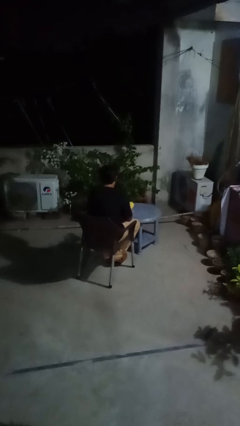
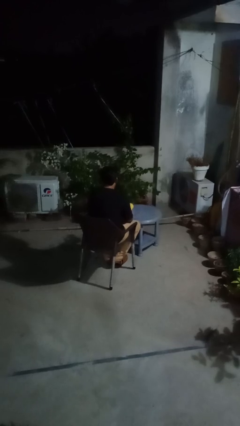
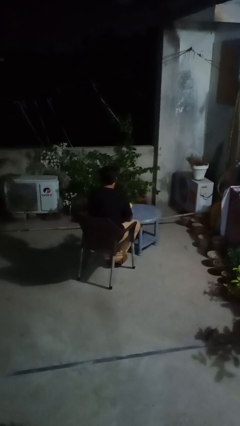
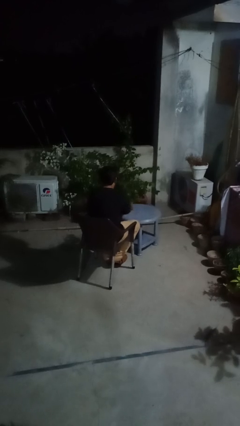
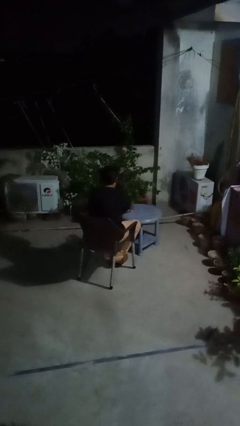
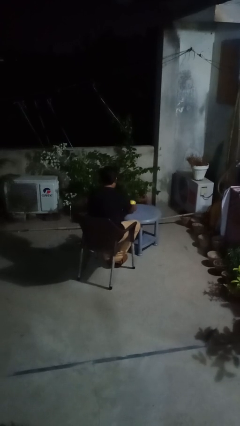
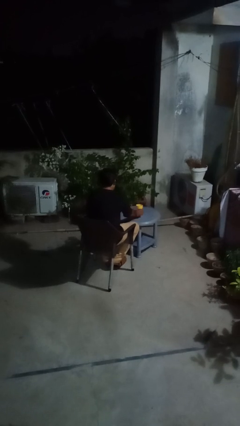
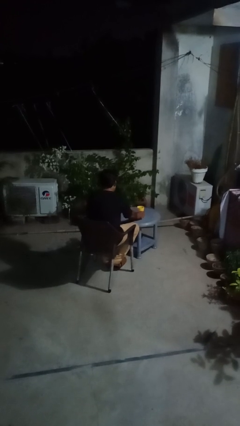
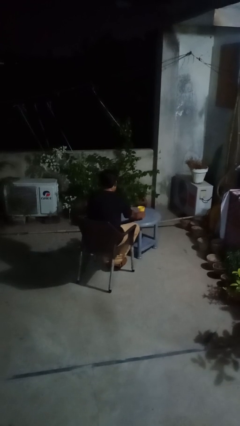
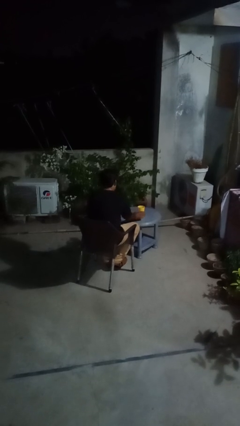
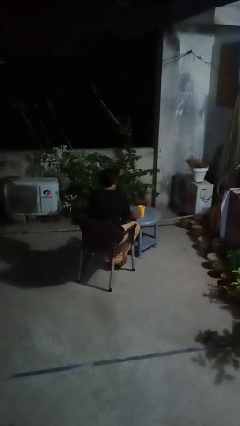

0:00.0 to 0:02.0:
person sets upright glass

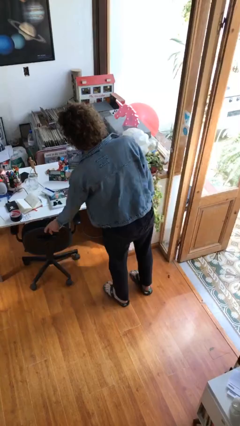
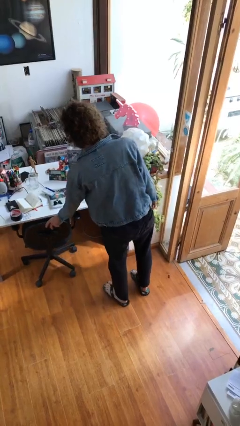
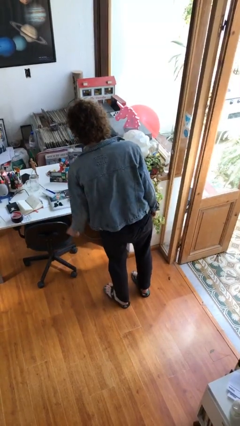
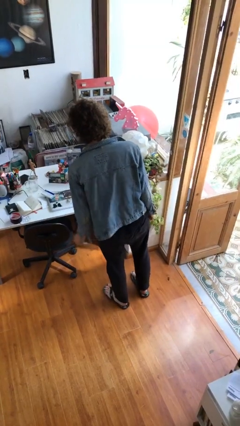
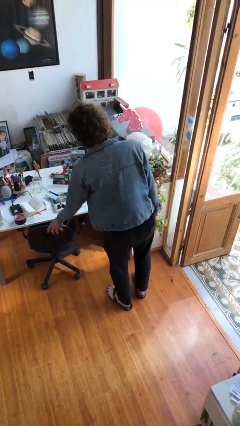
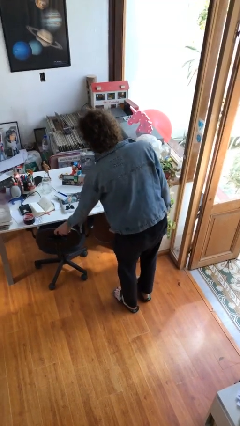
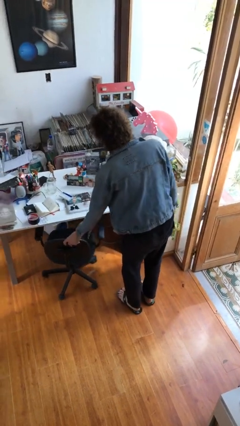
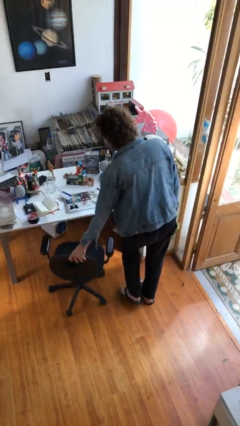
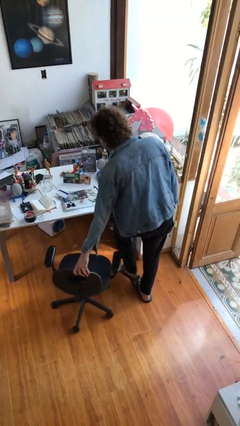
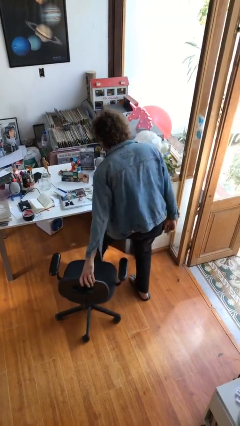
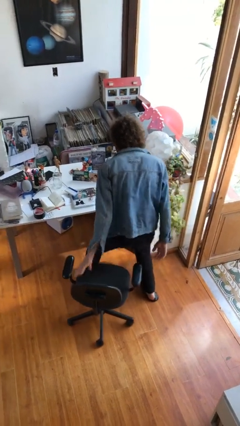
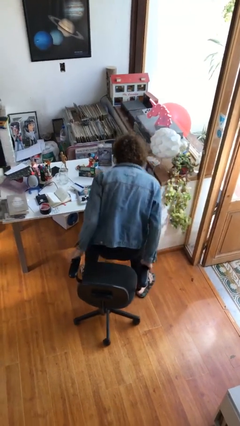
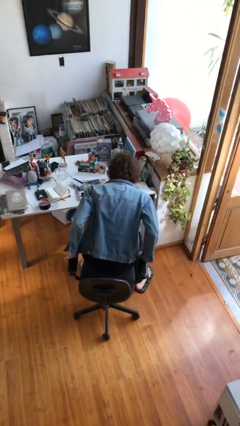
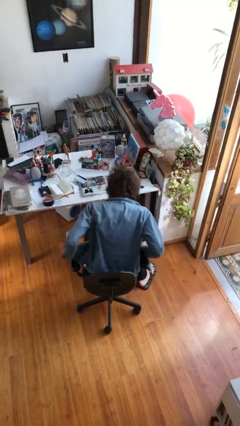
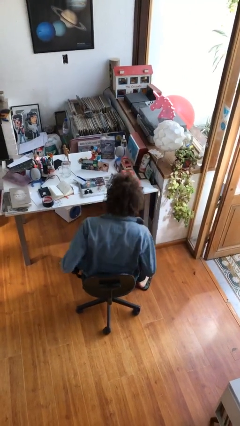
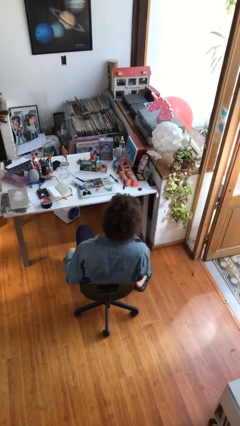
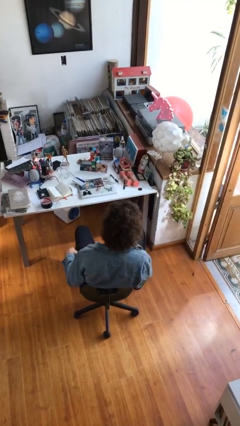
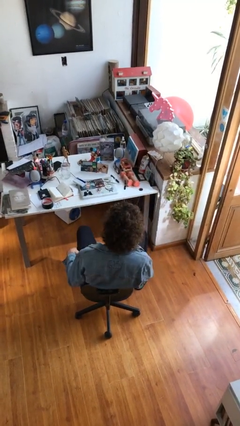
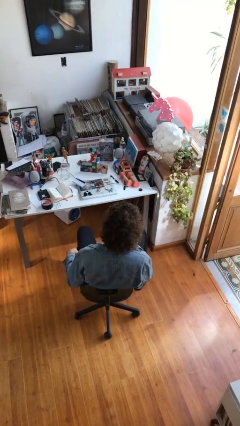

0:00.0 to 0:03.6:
person sits down

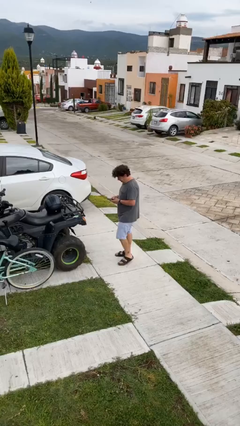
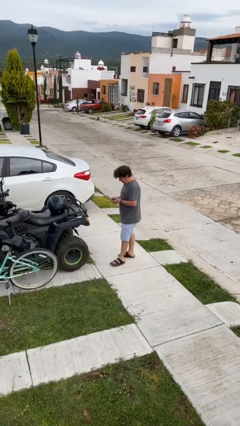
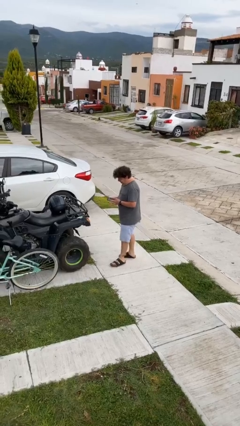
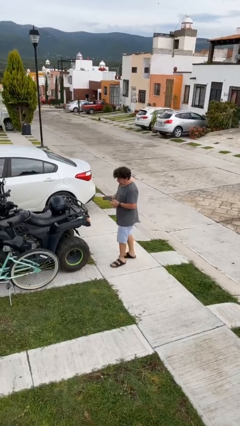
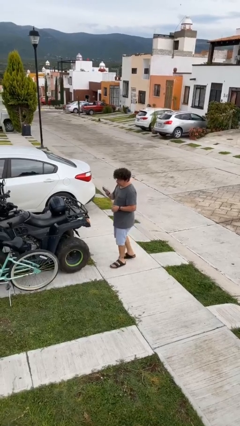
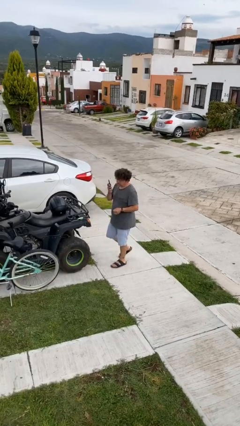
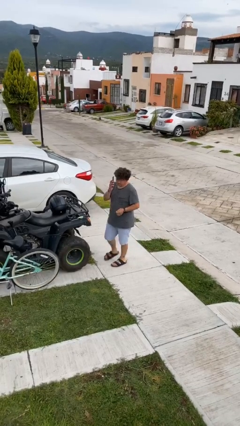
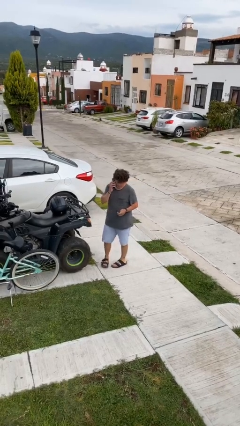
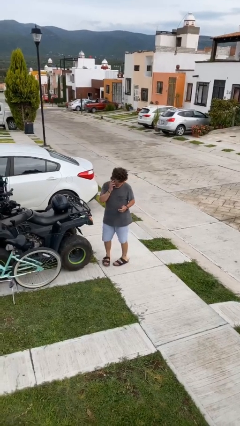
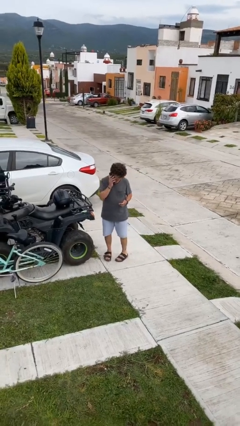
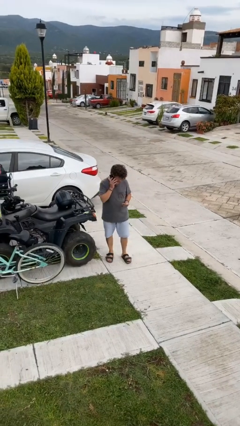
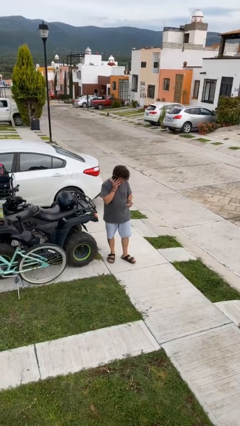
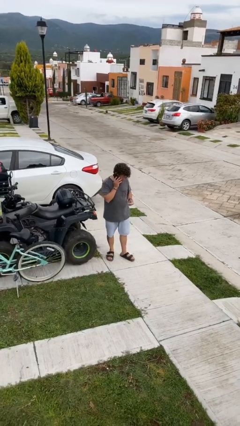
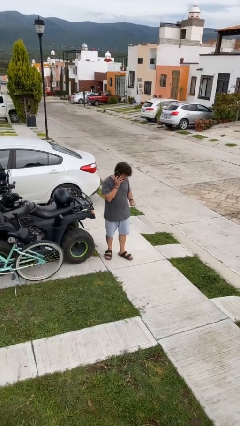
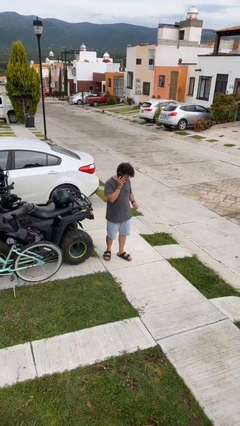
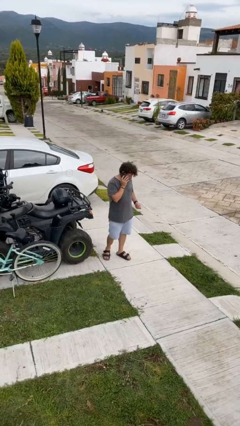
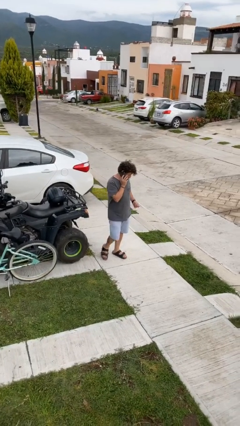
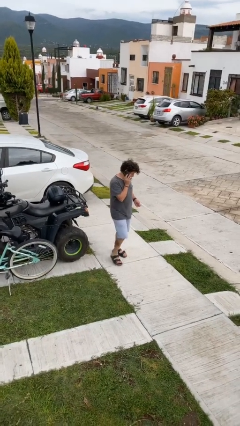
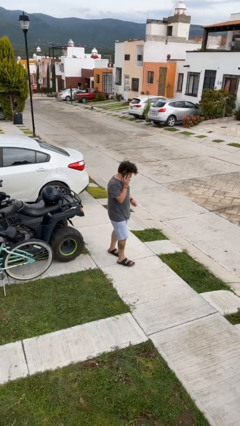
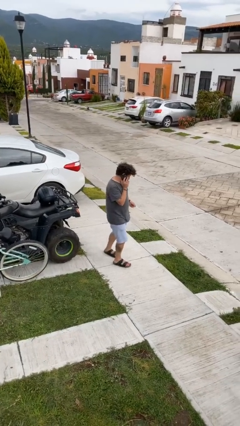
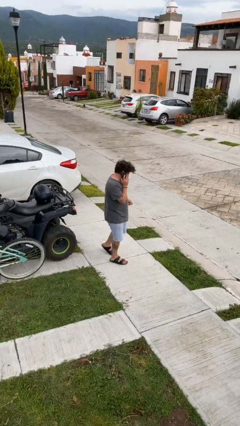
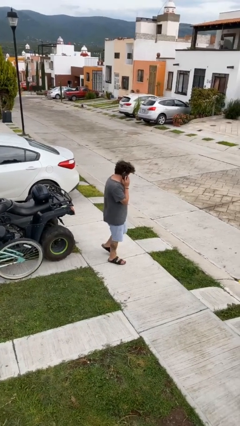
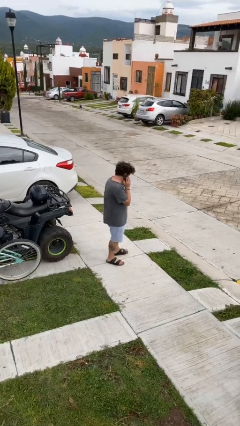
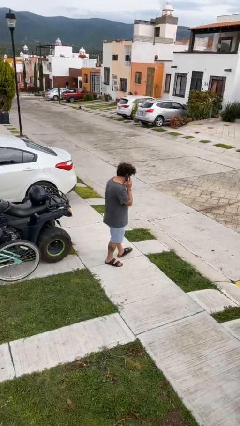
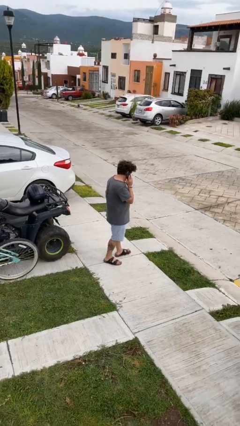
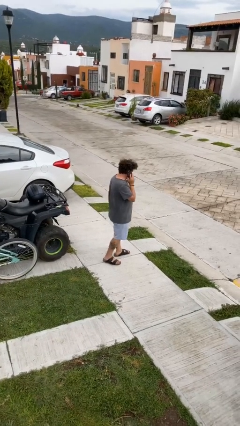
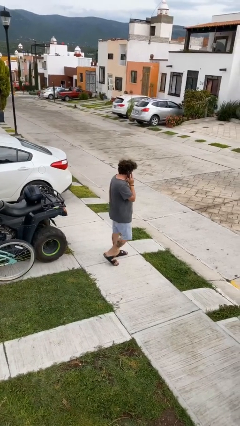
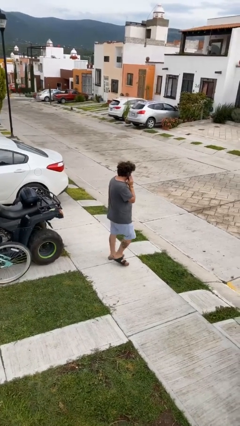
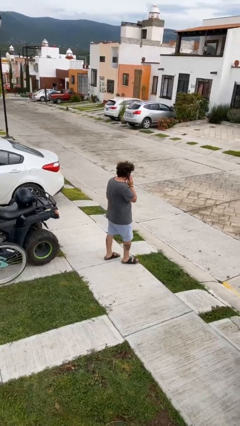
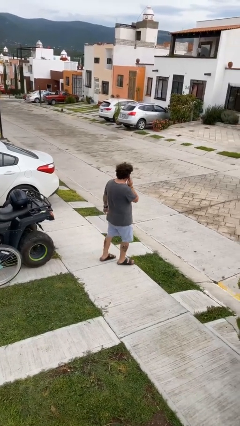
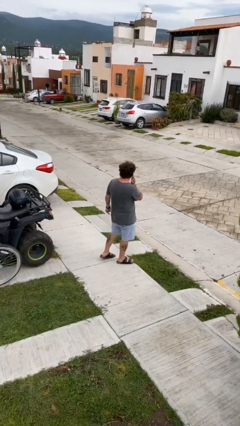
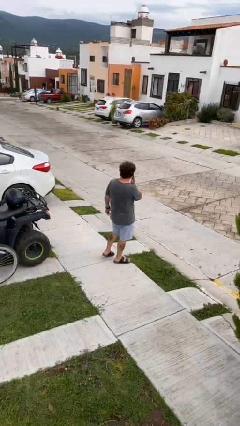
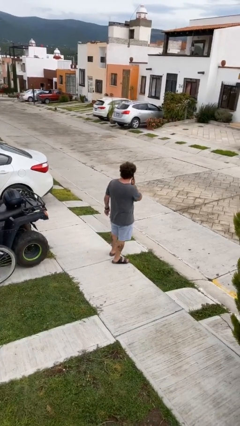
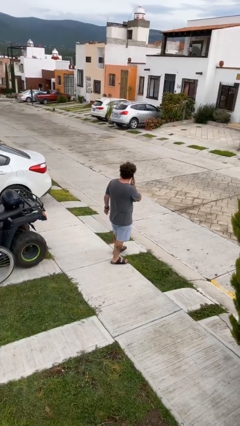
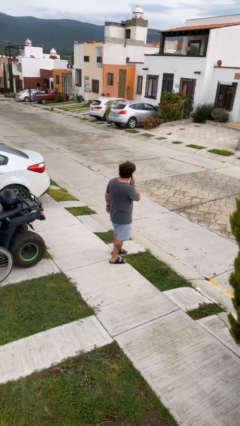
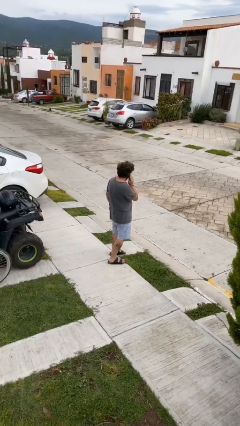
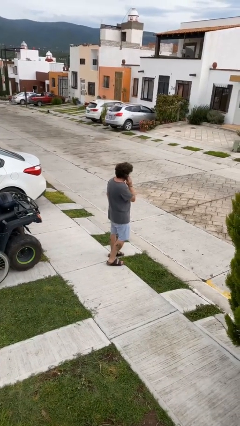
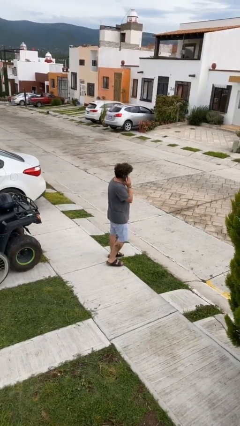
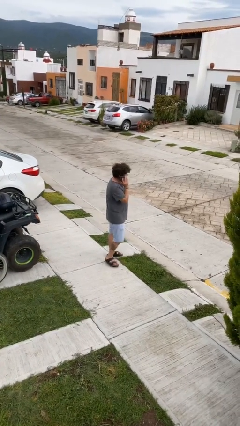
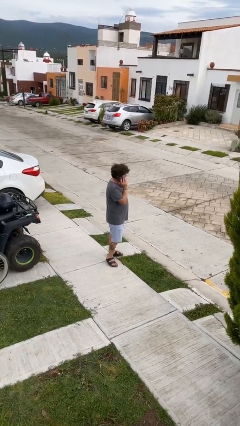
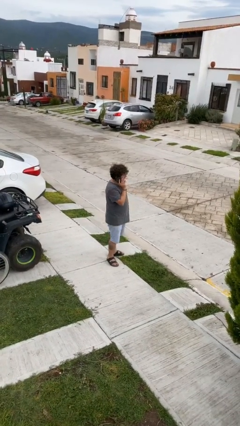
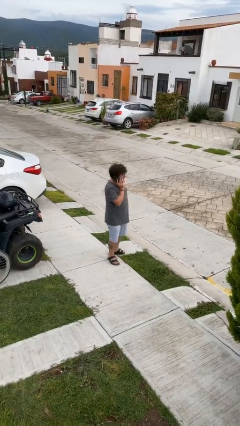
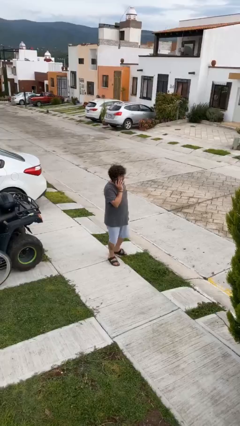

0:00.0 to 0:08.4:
person talks on phone

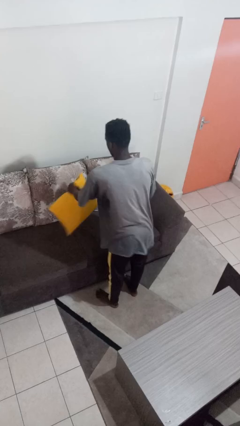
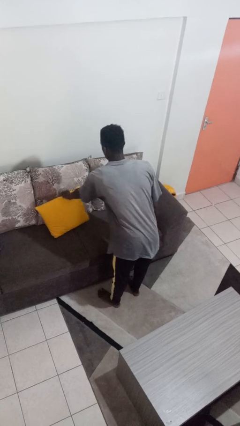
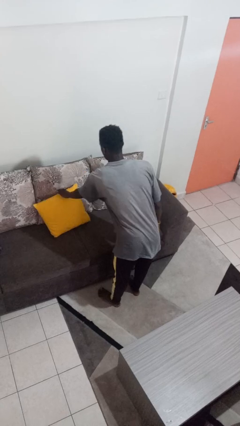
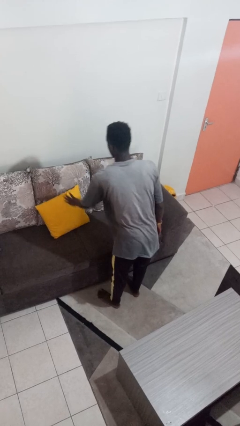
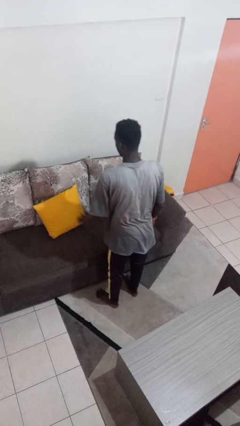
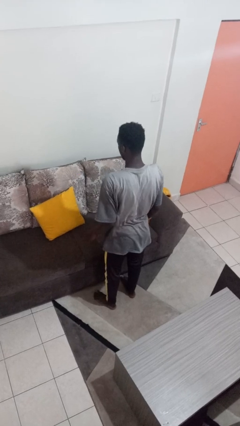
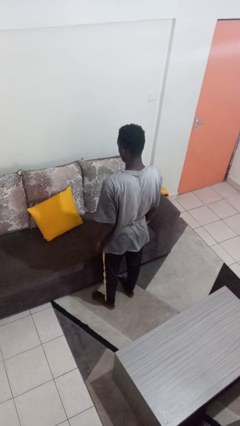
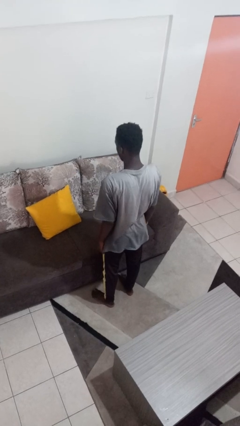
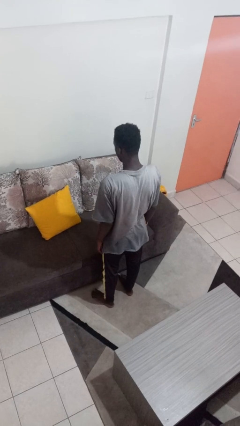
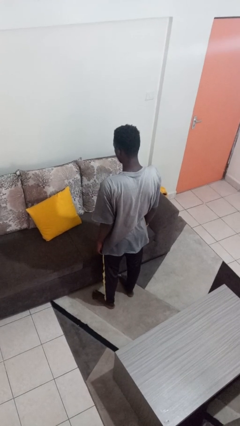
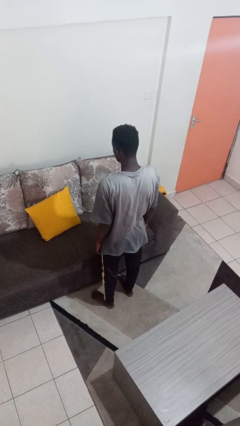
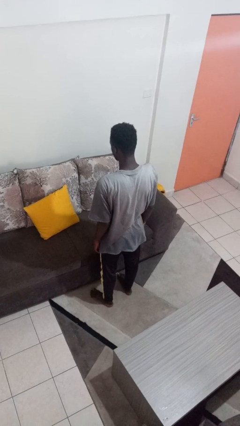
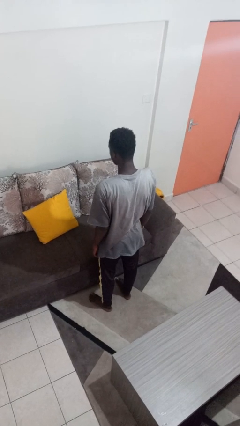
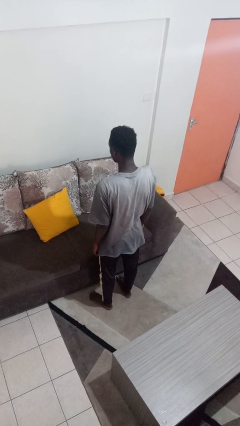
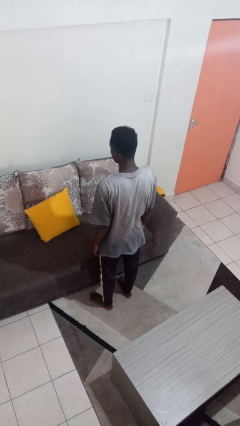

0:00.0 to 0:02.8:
person puts down object on couch

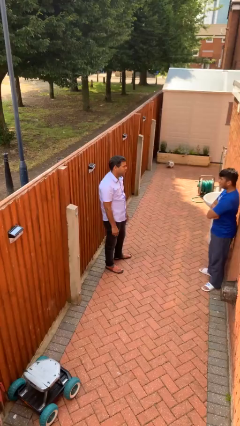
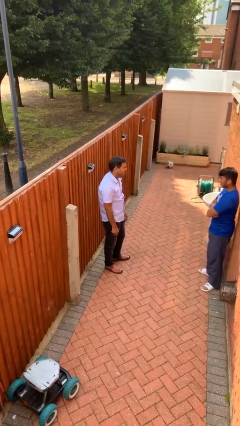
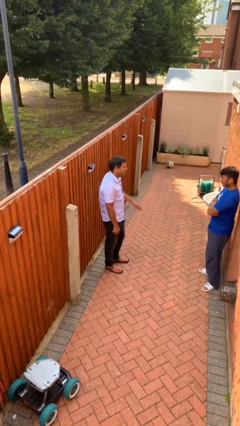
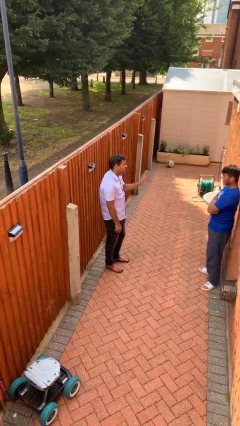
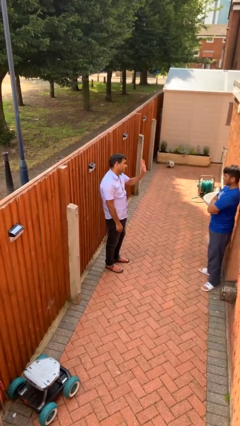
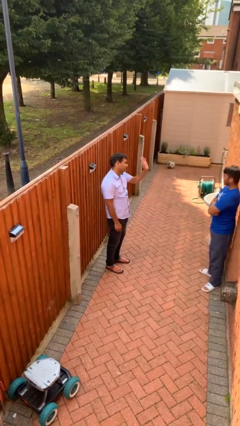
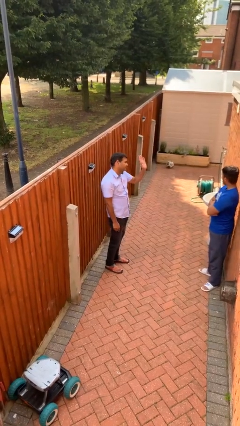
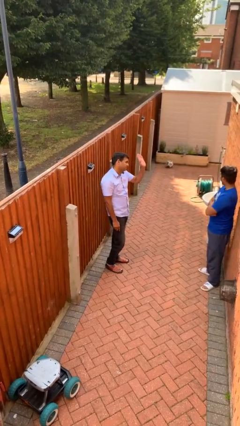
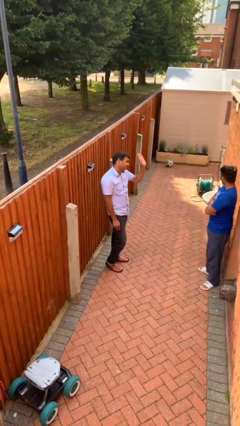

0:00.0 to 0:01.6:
person waves at person
